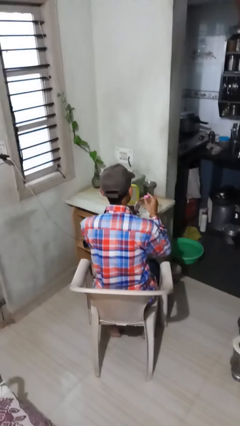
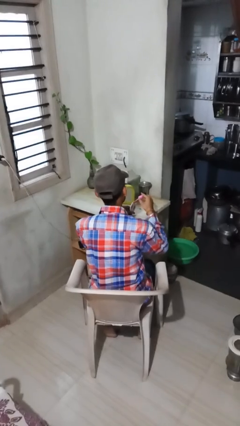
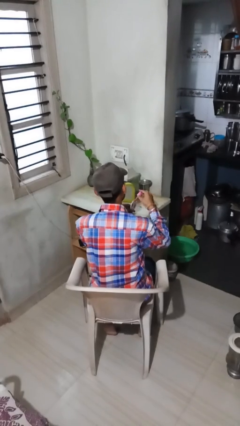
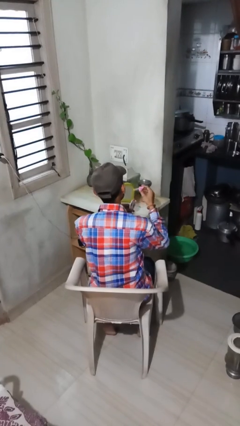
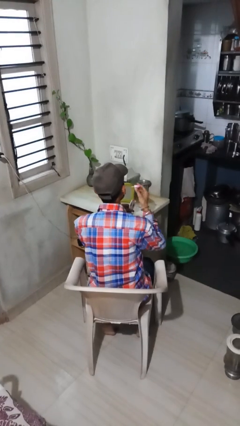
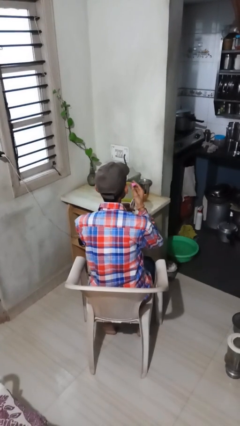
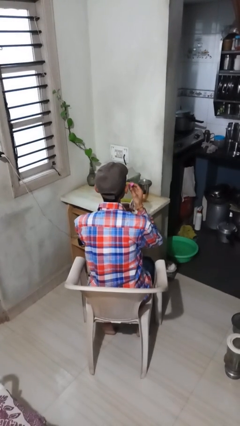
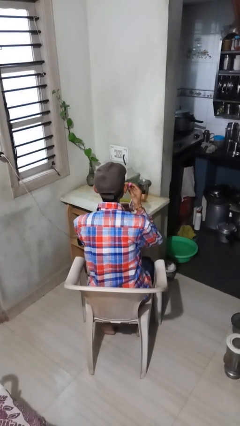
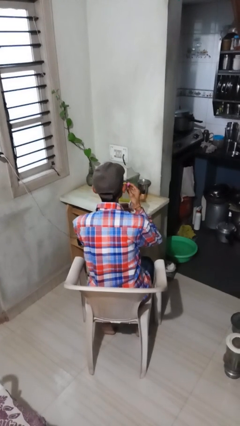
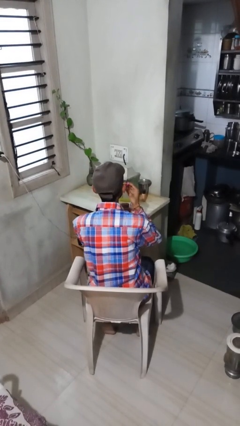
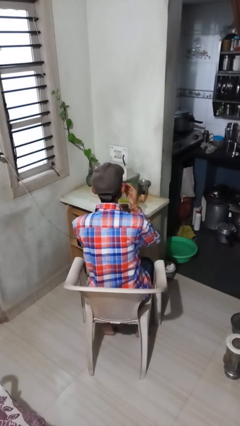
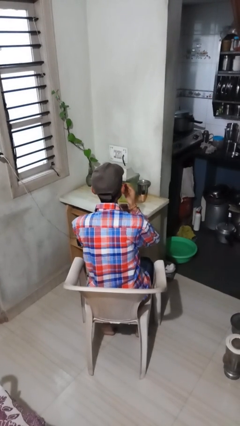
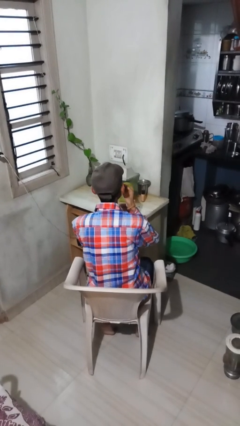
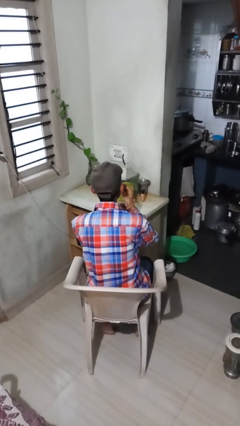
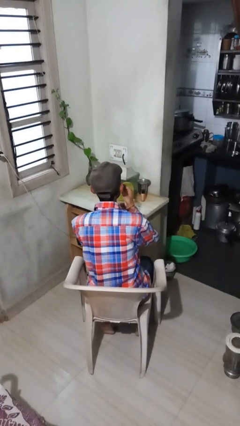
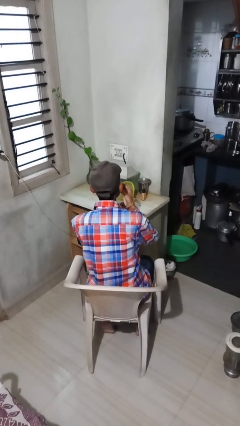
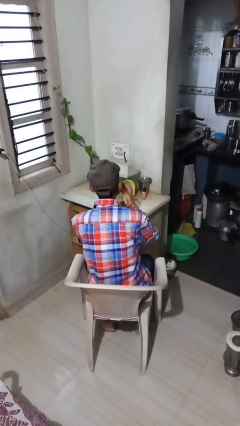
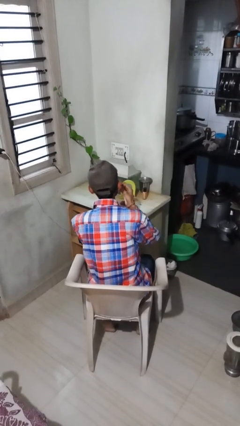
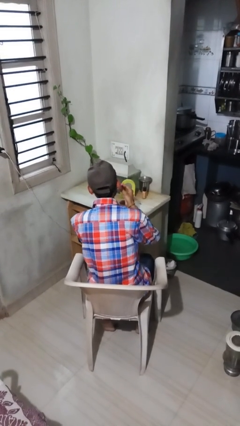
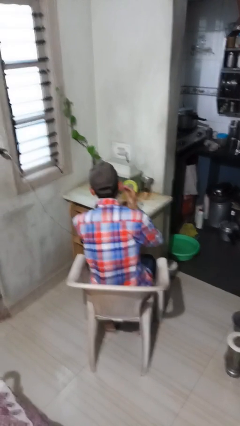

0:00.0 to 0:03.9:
person applies lip makeup

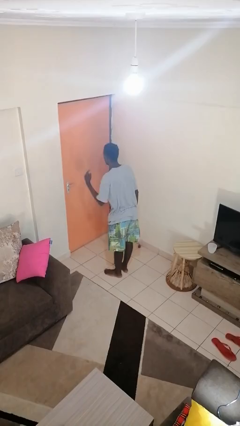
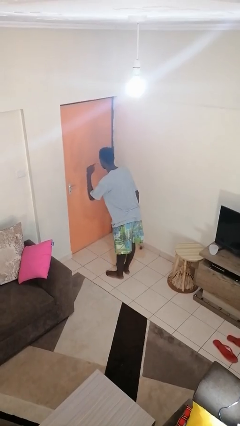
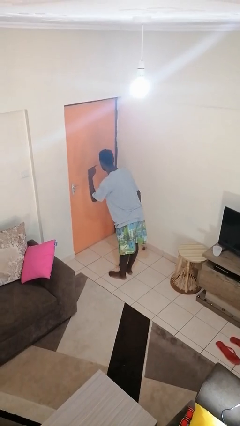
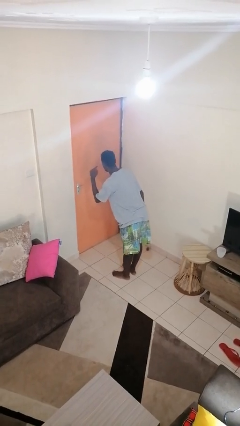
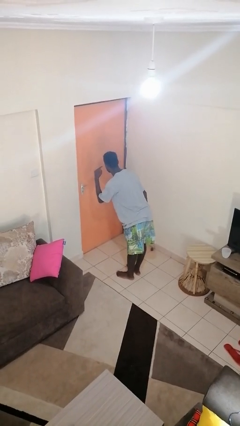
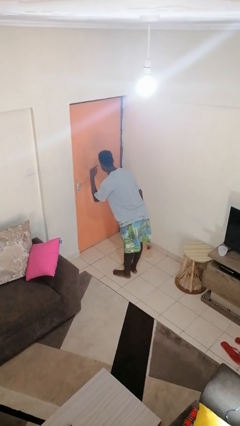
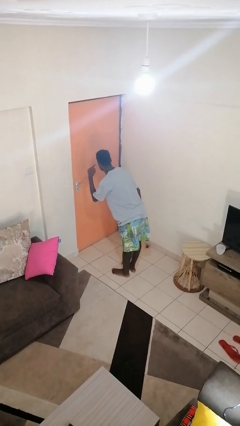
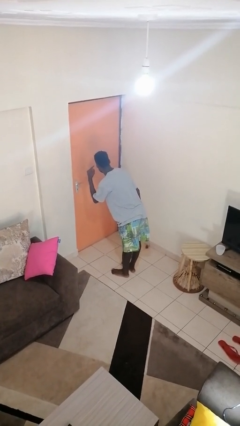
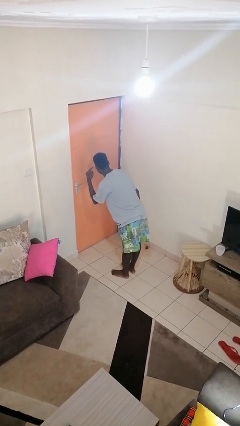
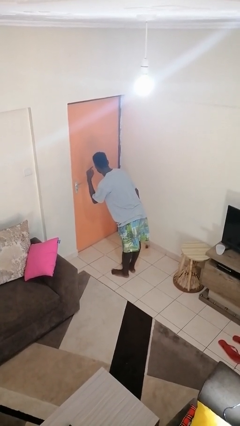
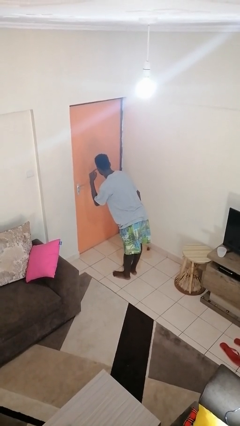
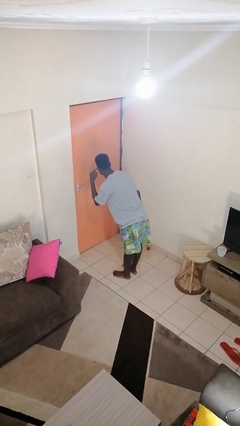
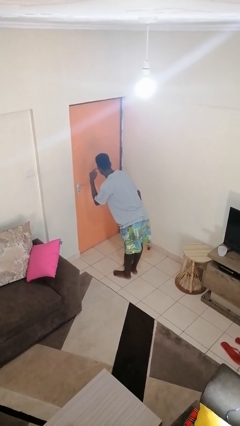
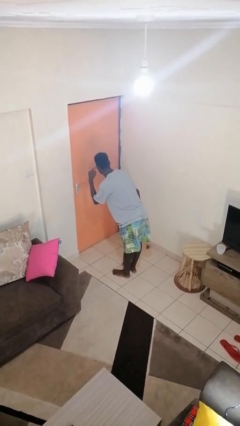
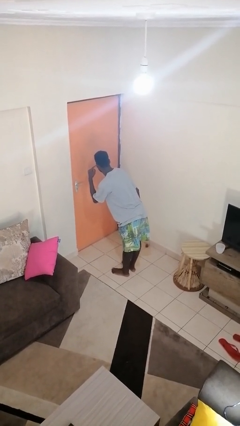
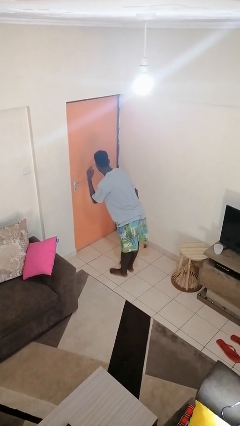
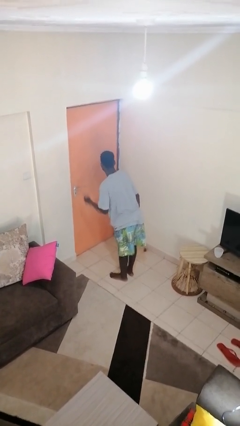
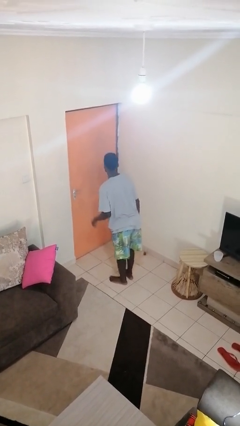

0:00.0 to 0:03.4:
person gestures listen closely

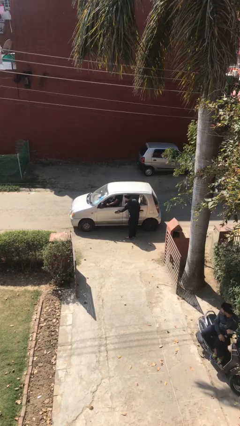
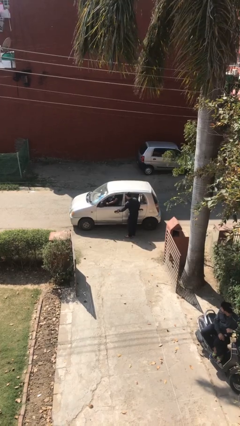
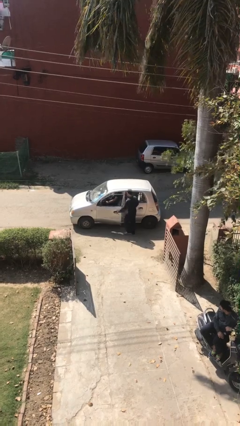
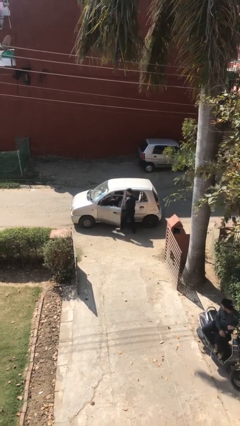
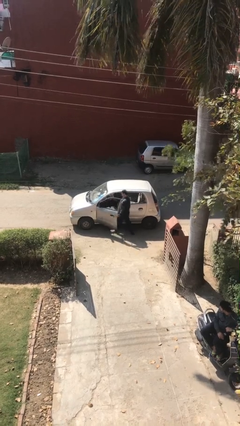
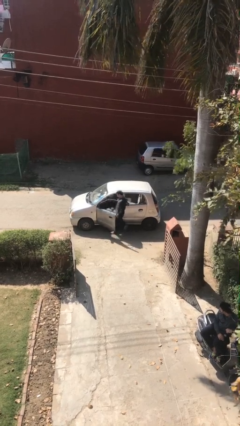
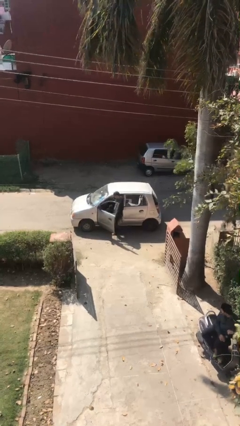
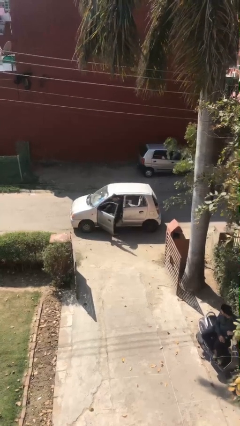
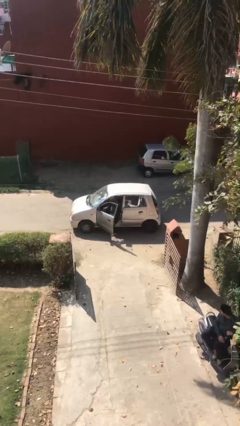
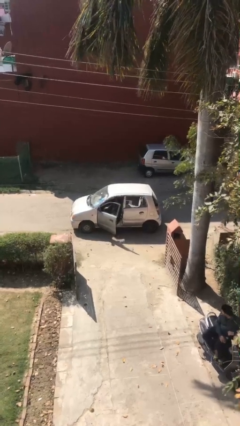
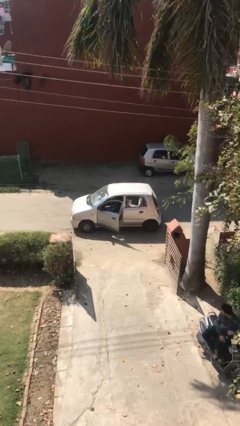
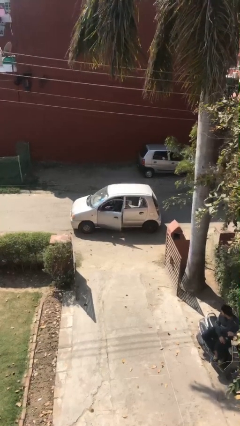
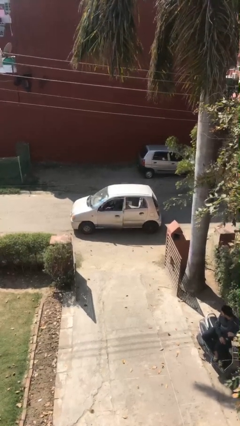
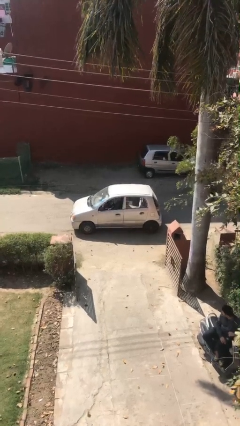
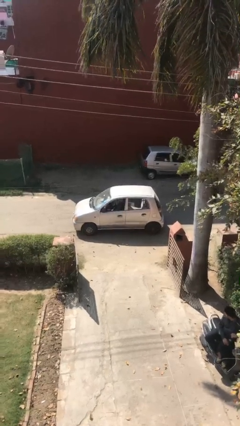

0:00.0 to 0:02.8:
car picks up person

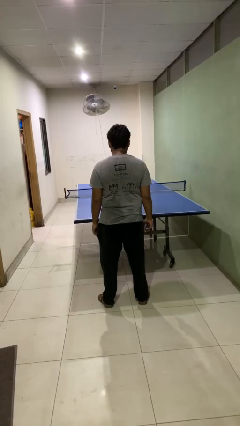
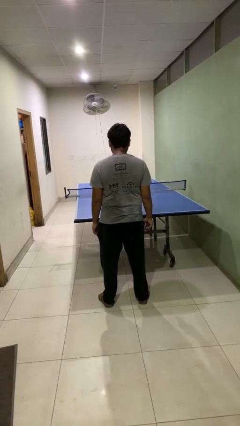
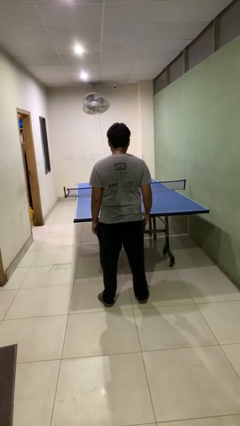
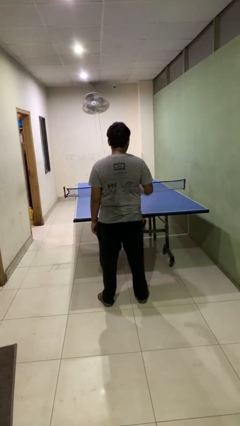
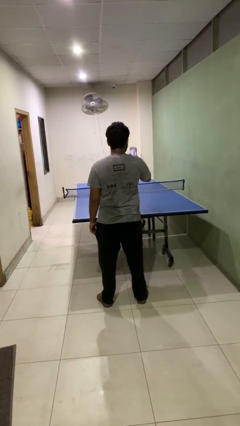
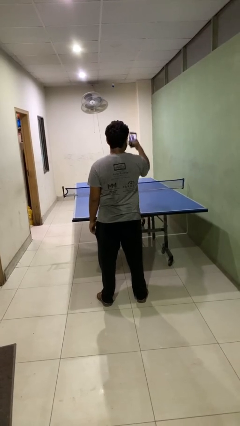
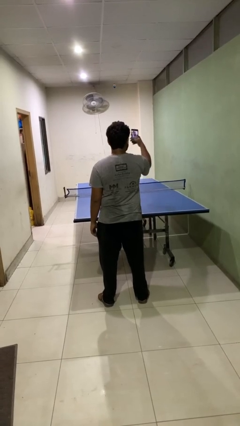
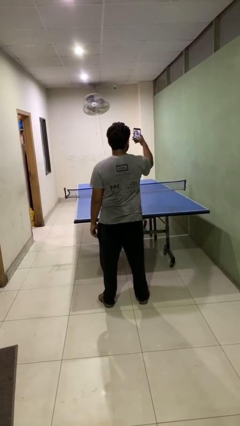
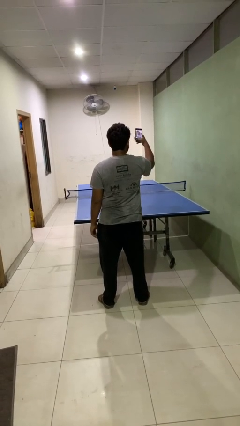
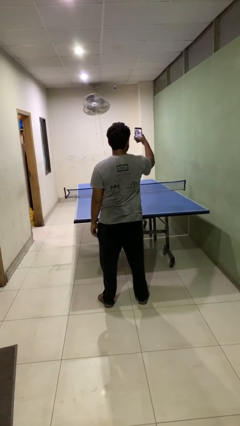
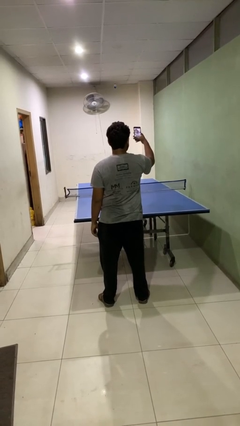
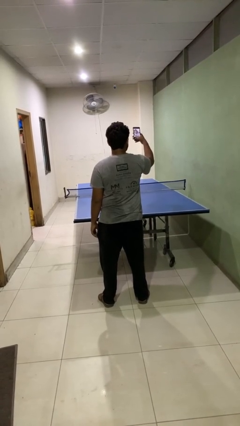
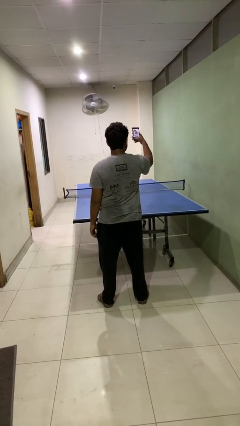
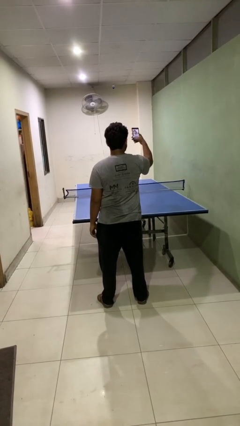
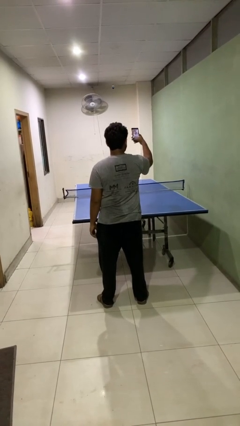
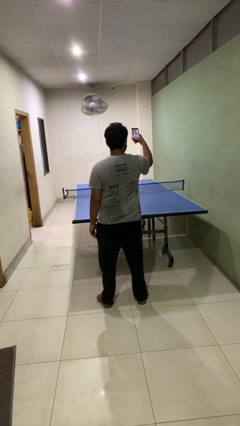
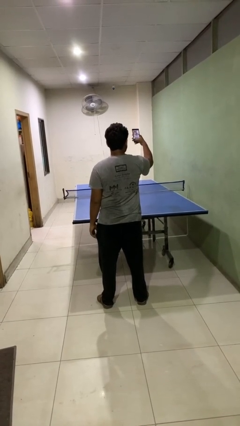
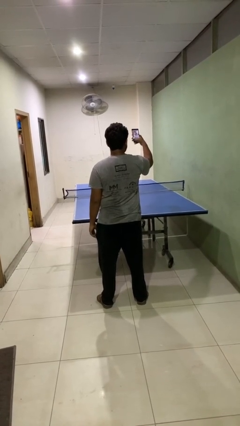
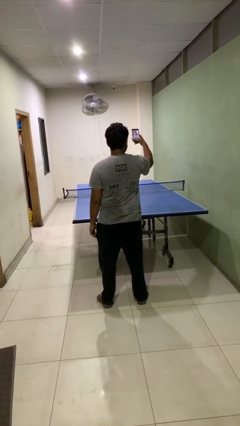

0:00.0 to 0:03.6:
person takes selfie

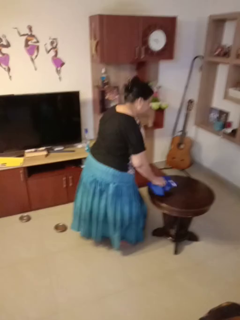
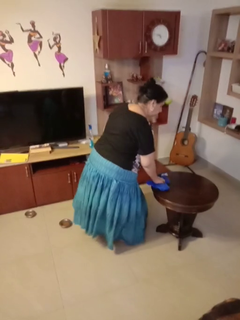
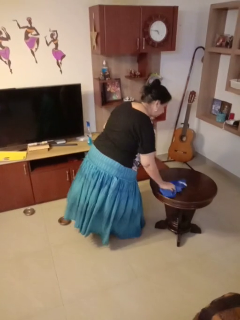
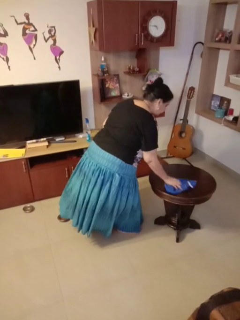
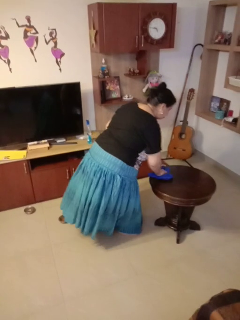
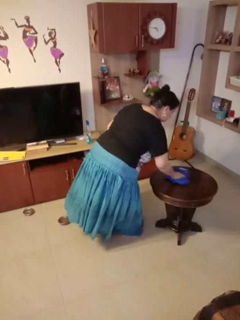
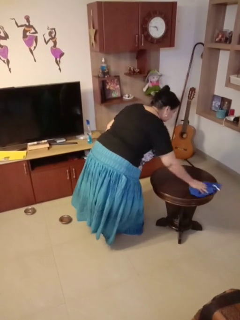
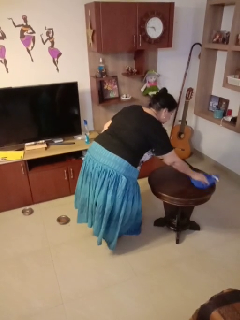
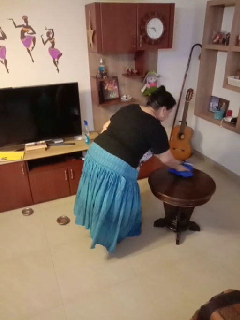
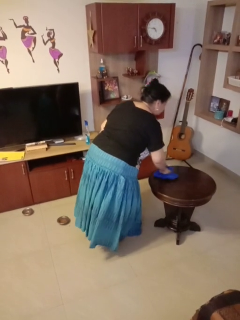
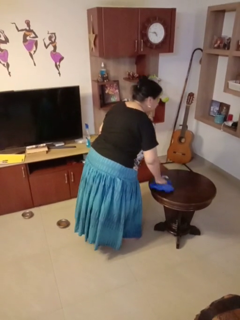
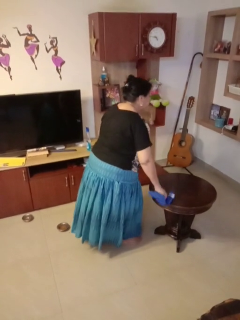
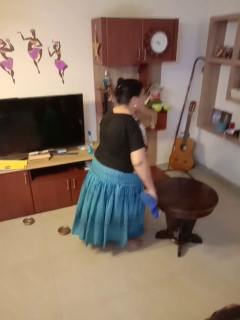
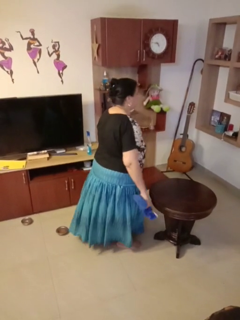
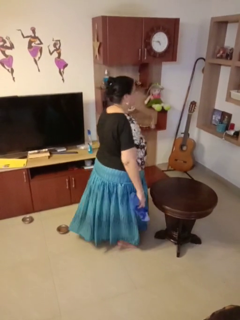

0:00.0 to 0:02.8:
person cleans table with rag

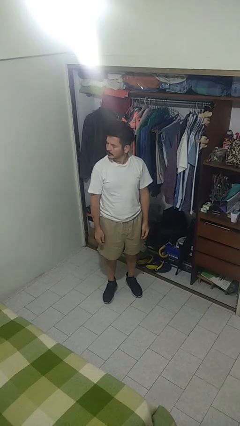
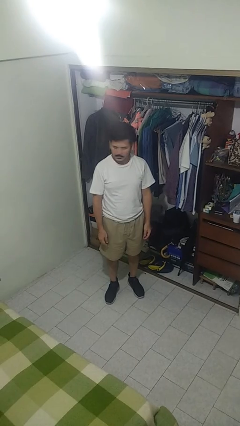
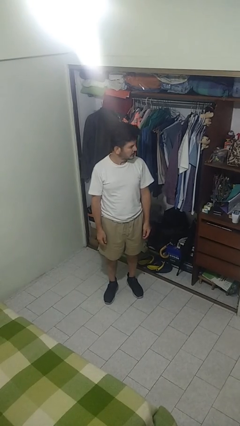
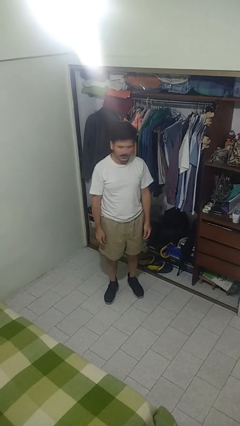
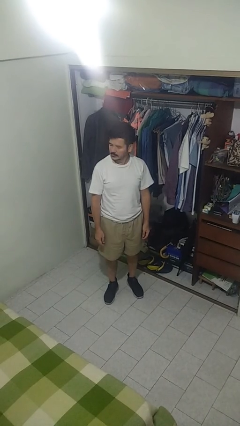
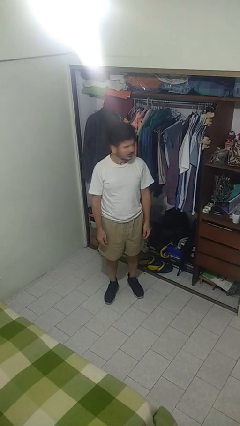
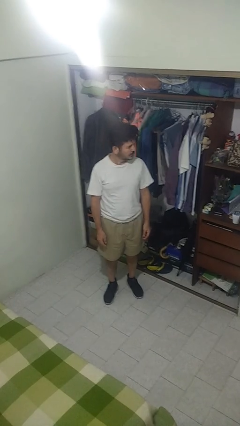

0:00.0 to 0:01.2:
person shakes head

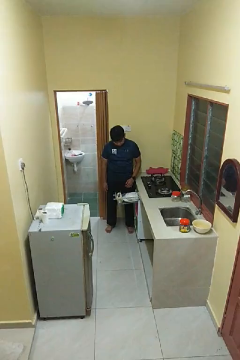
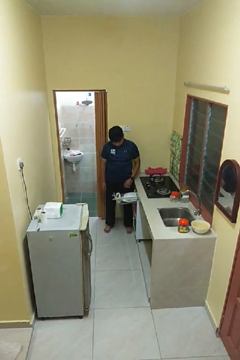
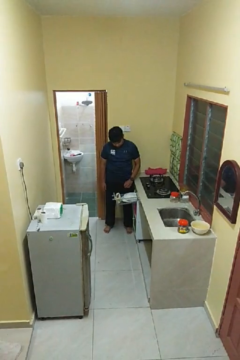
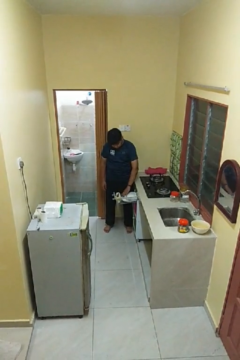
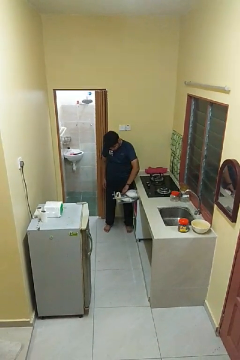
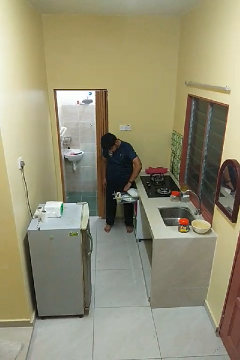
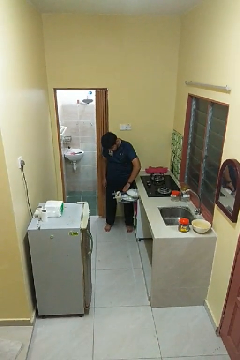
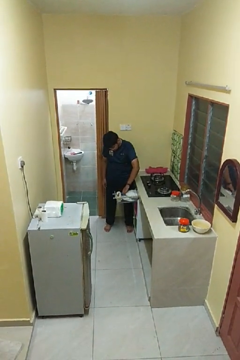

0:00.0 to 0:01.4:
person searches in kitchen drawer
